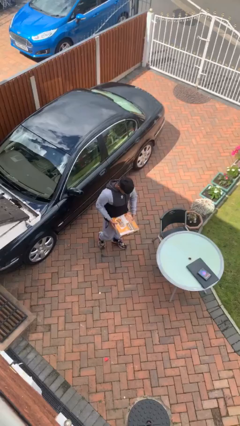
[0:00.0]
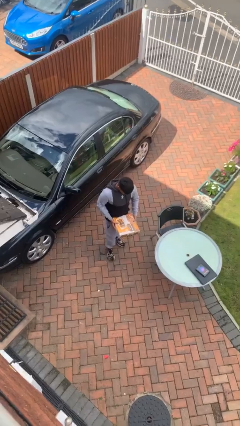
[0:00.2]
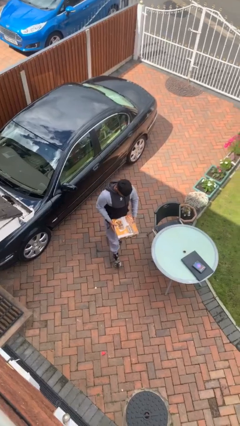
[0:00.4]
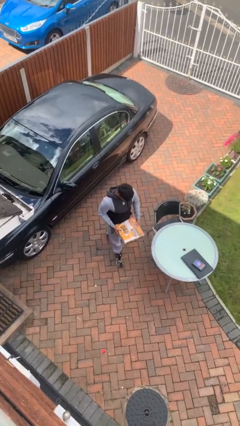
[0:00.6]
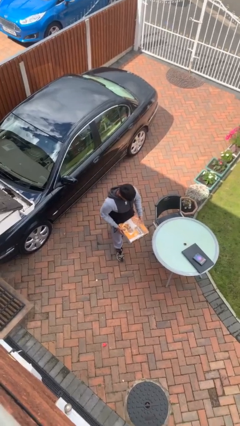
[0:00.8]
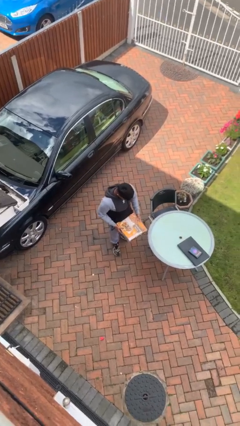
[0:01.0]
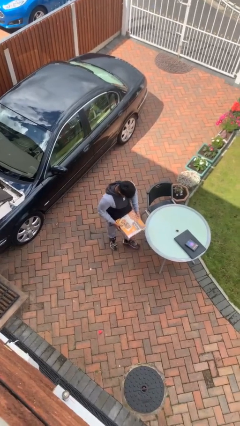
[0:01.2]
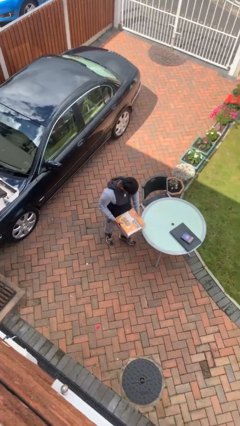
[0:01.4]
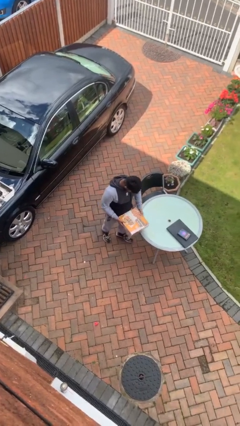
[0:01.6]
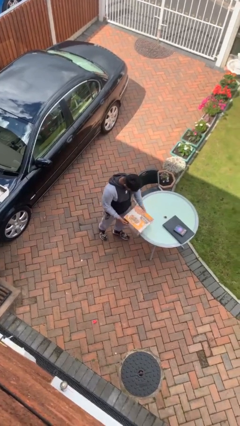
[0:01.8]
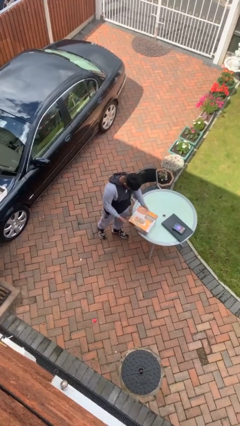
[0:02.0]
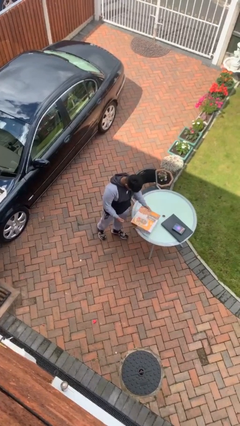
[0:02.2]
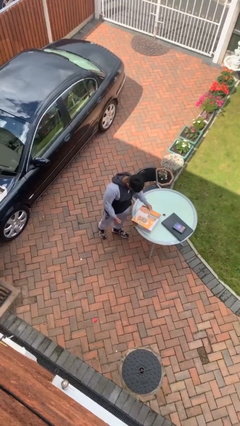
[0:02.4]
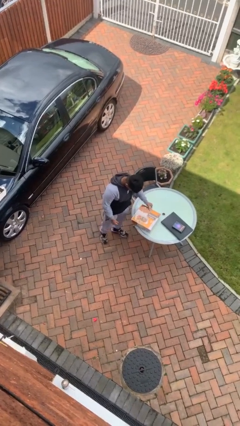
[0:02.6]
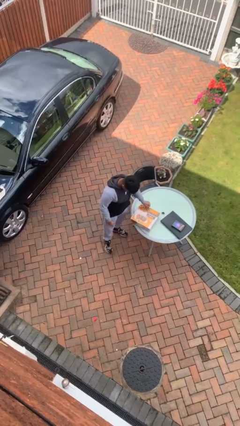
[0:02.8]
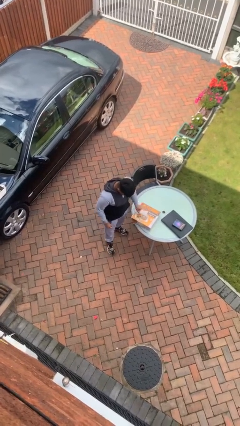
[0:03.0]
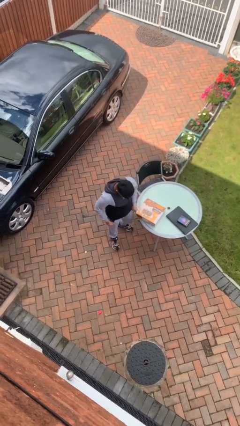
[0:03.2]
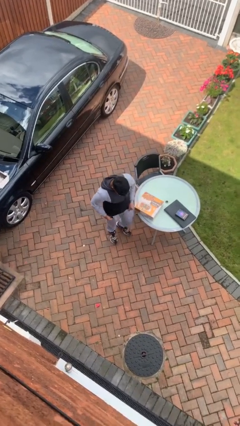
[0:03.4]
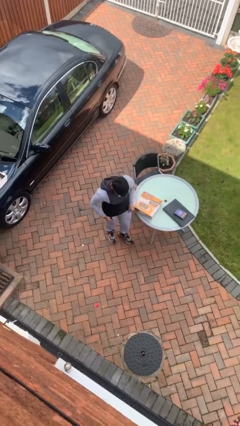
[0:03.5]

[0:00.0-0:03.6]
person puts down object on table

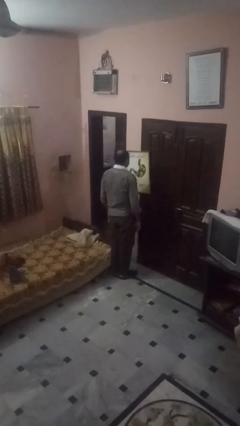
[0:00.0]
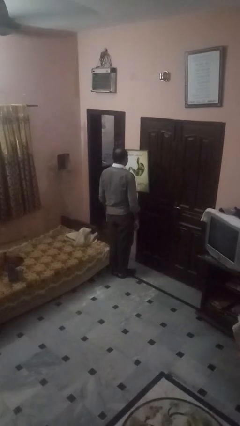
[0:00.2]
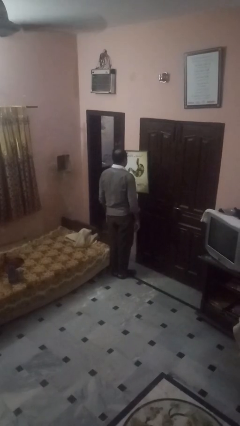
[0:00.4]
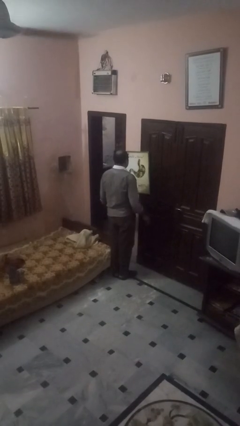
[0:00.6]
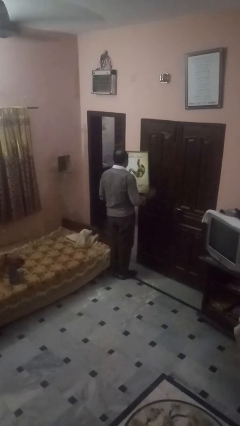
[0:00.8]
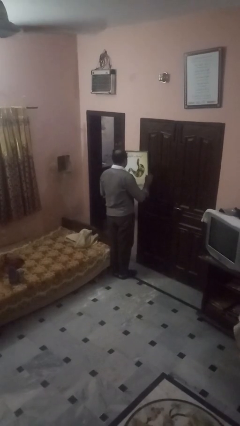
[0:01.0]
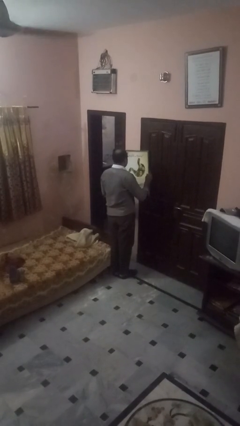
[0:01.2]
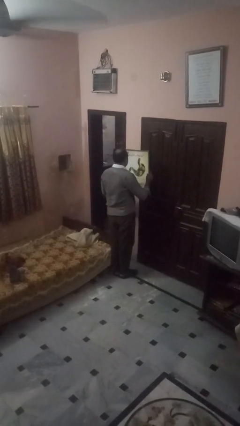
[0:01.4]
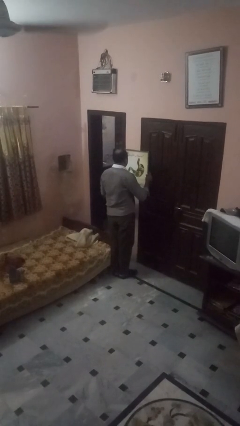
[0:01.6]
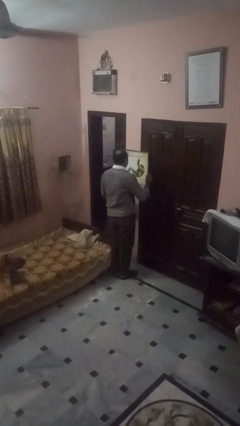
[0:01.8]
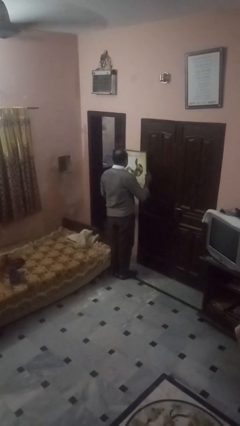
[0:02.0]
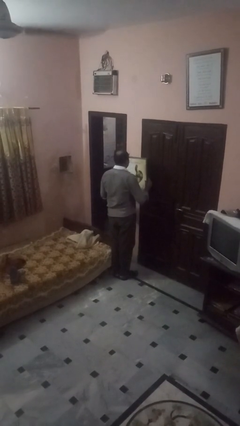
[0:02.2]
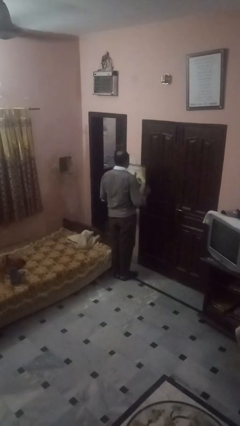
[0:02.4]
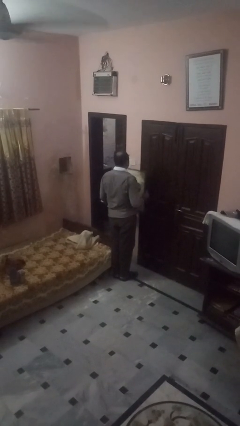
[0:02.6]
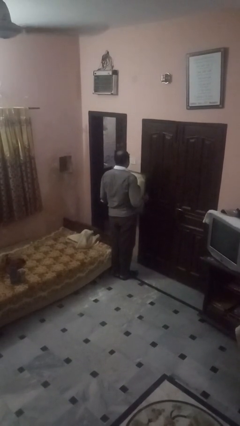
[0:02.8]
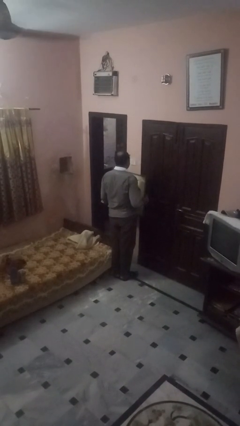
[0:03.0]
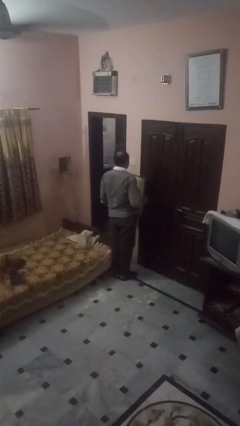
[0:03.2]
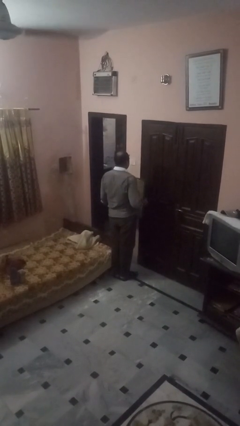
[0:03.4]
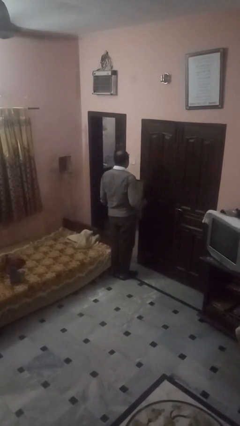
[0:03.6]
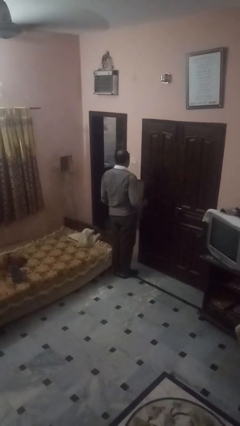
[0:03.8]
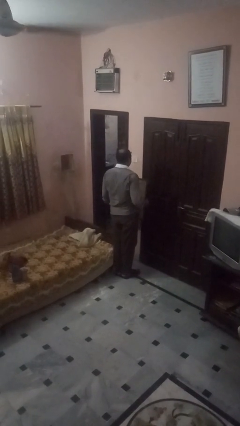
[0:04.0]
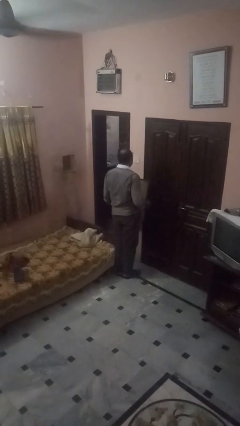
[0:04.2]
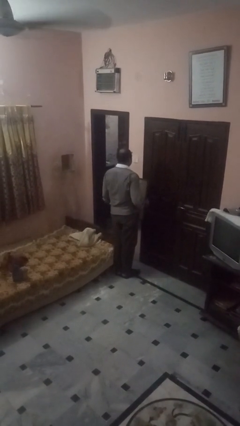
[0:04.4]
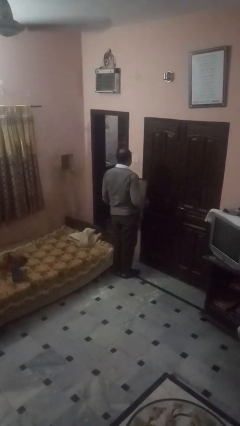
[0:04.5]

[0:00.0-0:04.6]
person takes down picture frame

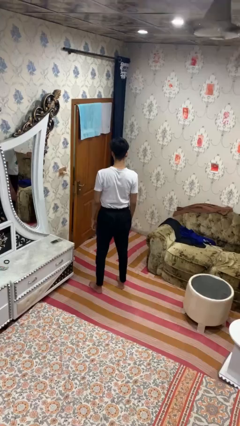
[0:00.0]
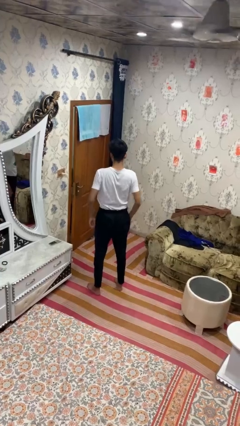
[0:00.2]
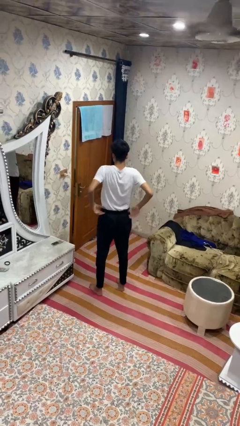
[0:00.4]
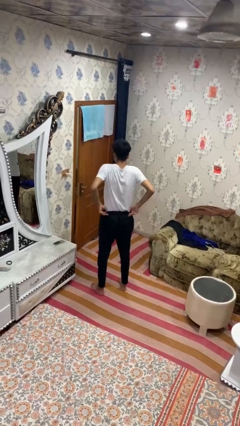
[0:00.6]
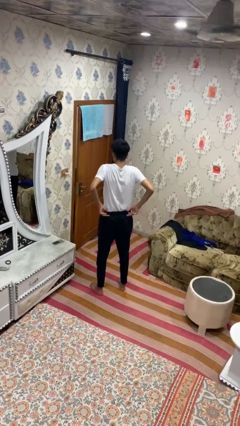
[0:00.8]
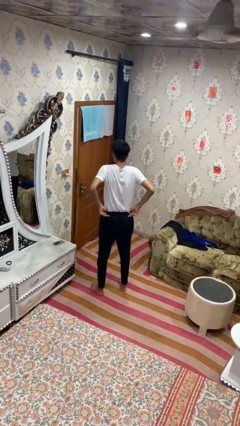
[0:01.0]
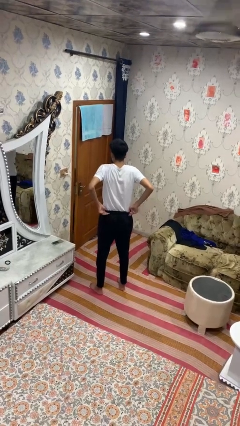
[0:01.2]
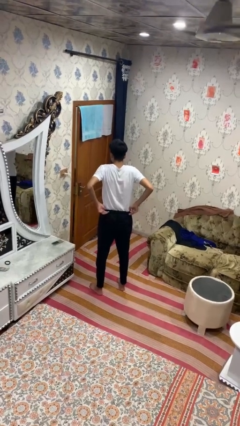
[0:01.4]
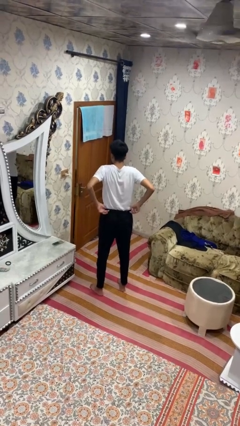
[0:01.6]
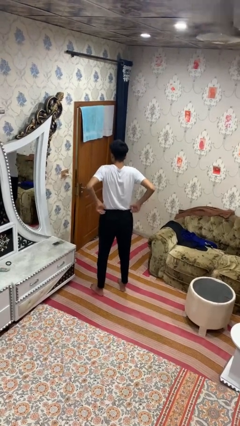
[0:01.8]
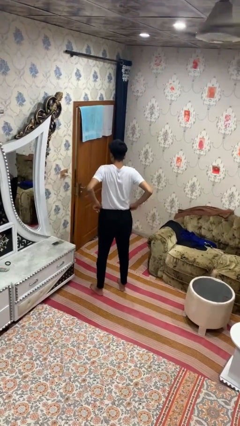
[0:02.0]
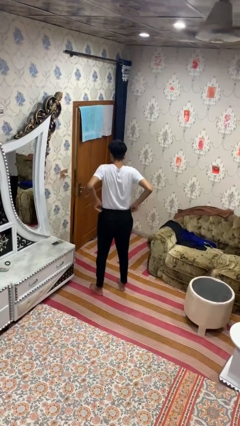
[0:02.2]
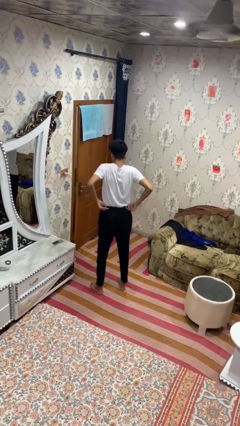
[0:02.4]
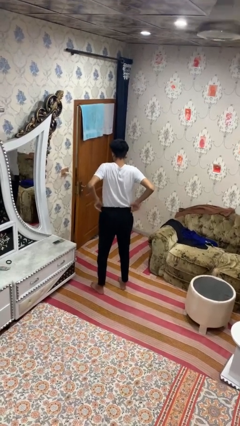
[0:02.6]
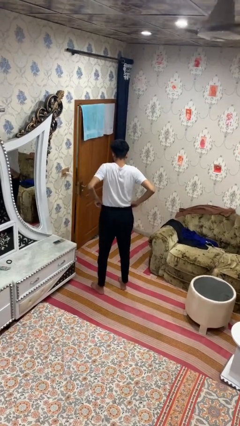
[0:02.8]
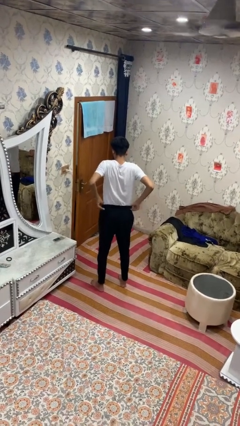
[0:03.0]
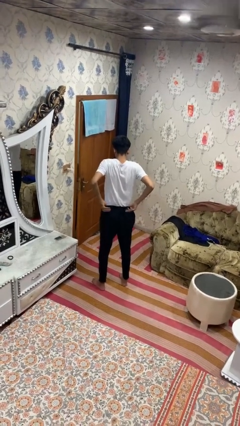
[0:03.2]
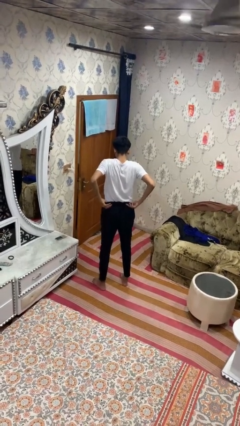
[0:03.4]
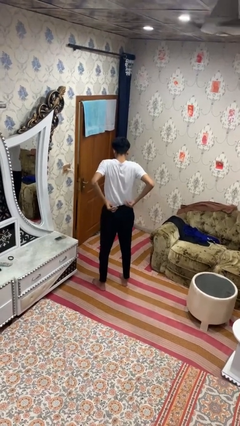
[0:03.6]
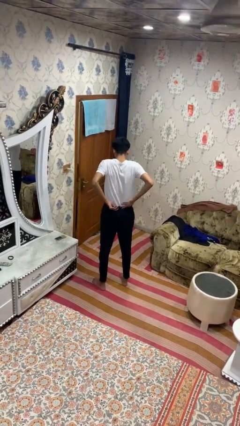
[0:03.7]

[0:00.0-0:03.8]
person hikes up pants

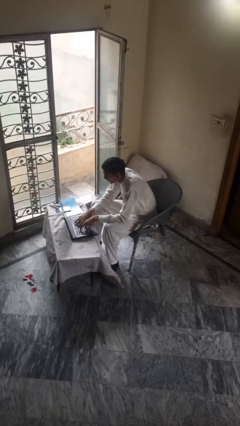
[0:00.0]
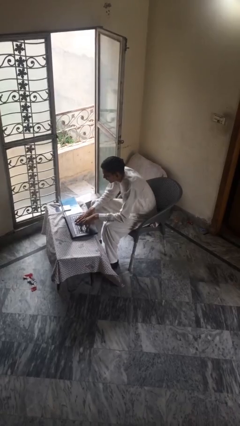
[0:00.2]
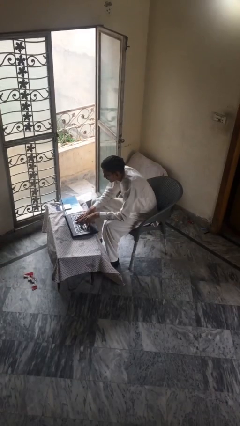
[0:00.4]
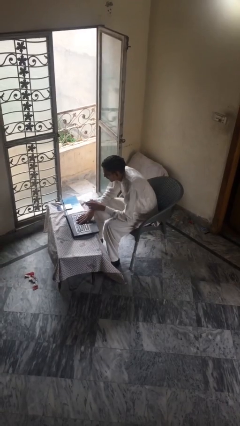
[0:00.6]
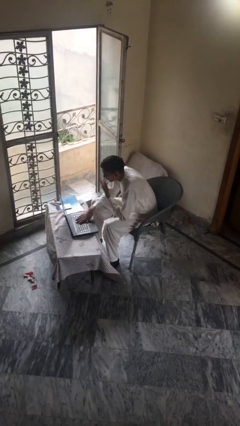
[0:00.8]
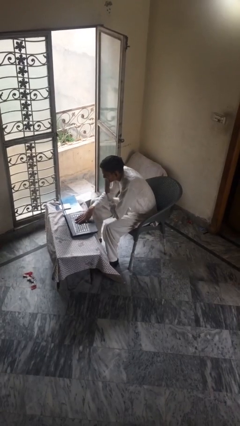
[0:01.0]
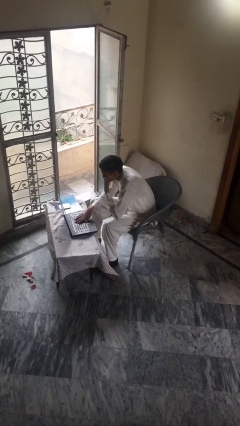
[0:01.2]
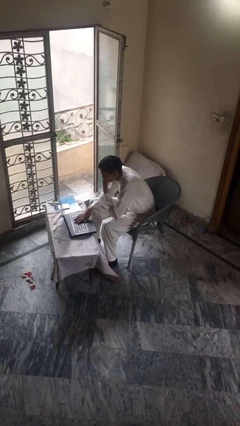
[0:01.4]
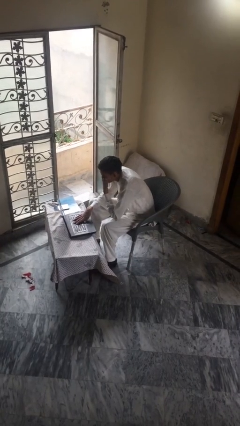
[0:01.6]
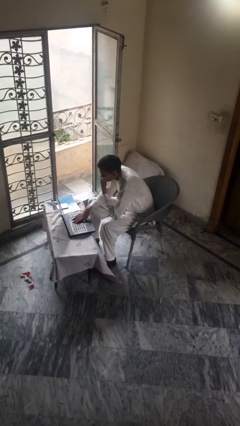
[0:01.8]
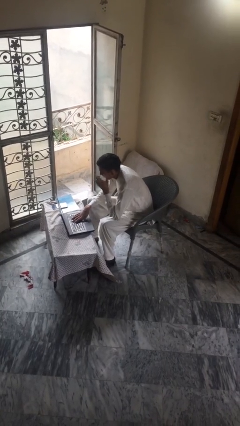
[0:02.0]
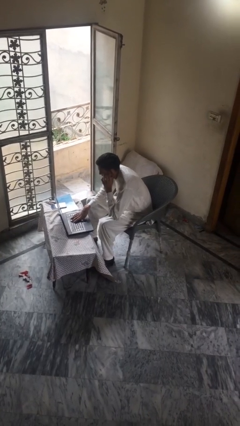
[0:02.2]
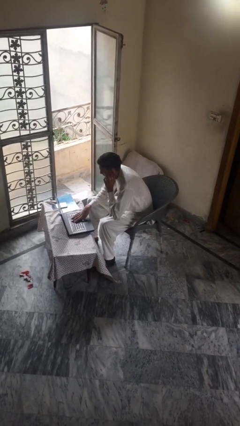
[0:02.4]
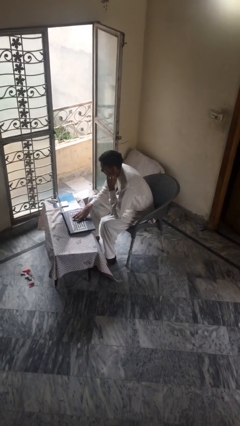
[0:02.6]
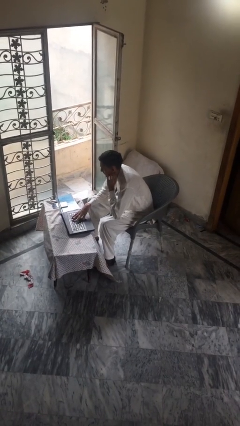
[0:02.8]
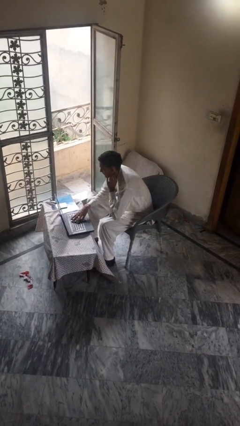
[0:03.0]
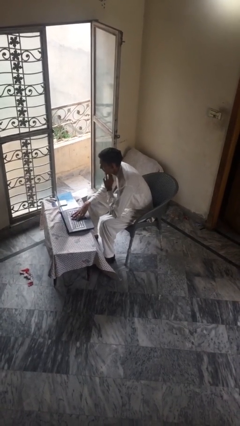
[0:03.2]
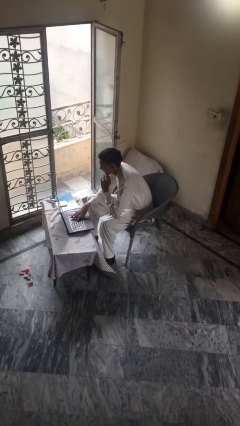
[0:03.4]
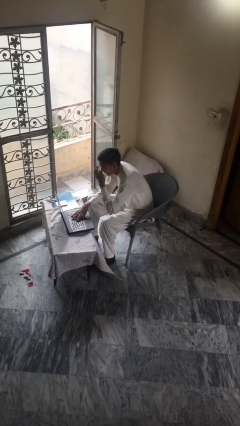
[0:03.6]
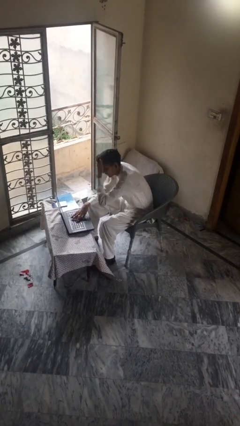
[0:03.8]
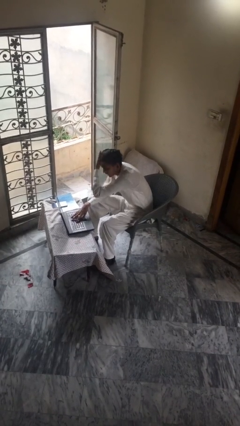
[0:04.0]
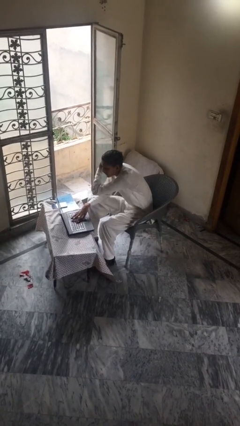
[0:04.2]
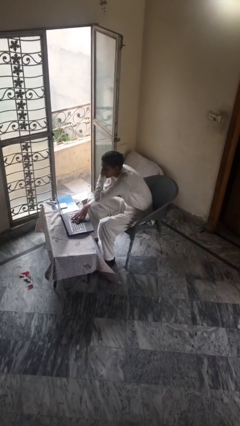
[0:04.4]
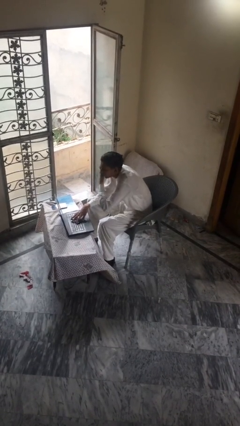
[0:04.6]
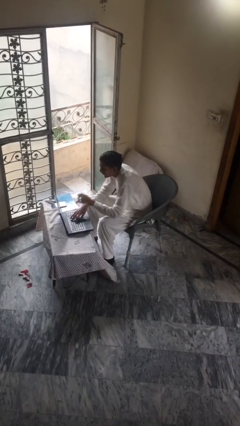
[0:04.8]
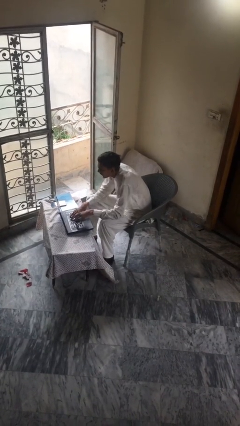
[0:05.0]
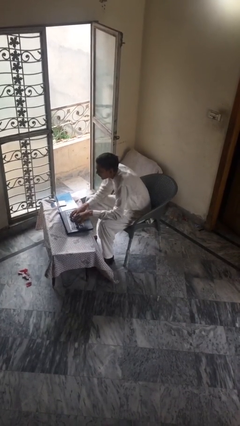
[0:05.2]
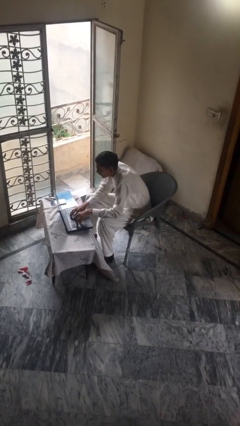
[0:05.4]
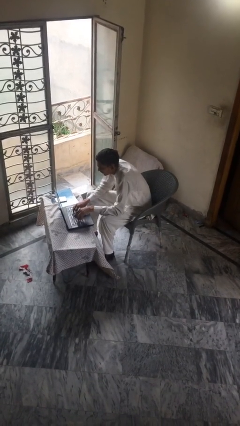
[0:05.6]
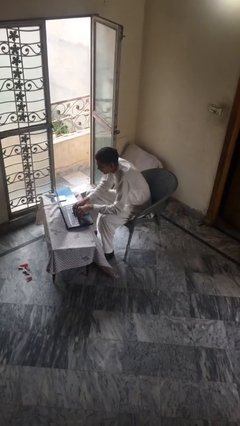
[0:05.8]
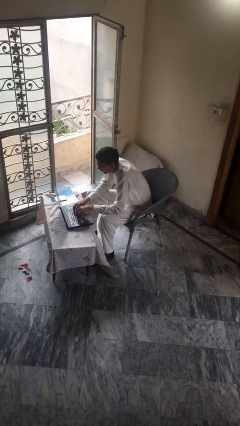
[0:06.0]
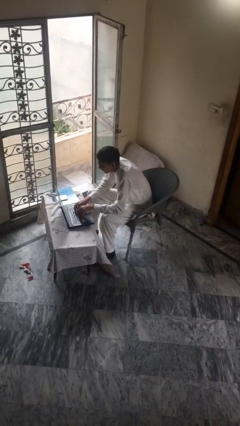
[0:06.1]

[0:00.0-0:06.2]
person interacts with laptop
